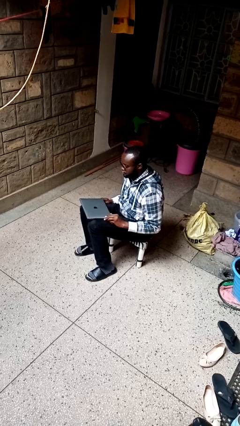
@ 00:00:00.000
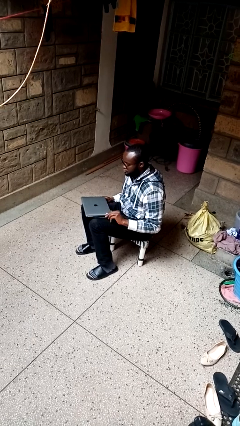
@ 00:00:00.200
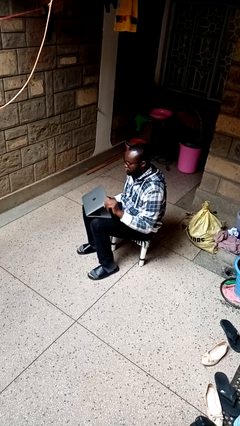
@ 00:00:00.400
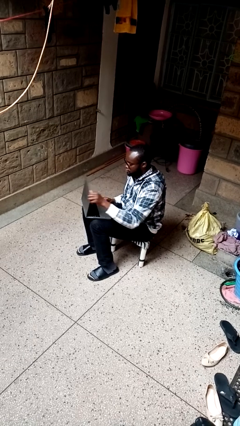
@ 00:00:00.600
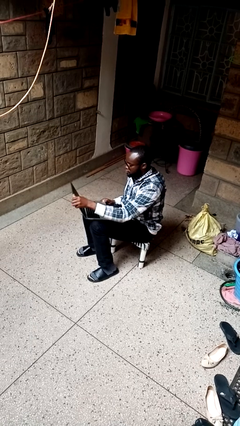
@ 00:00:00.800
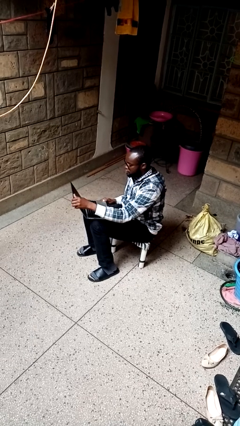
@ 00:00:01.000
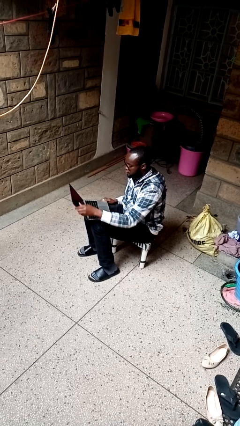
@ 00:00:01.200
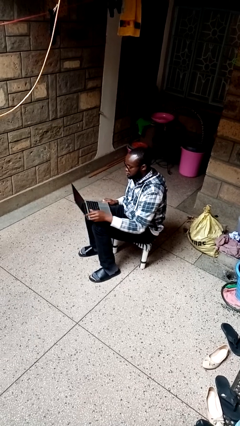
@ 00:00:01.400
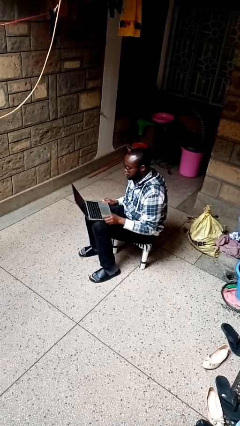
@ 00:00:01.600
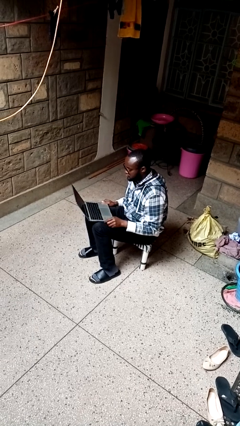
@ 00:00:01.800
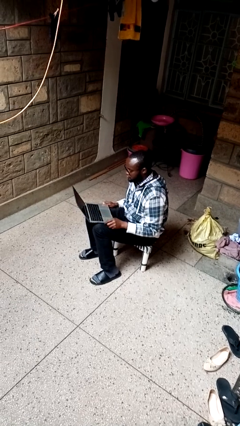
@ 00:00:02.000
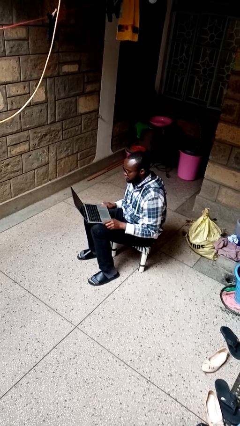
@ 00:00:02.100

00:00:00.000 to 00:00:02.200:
person opens laptop

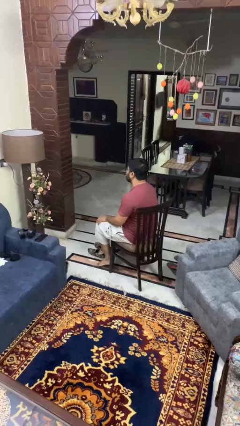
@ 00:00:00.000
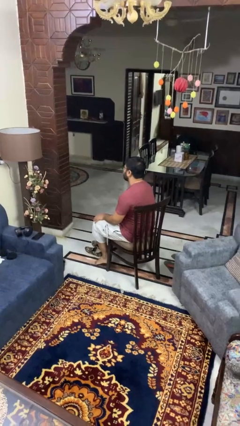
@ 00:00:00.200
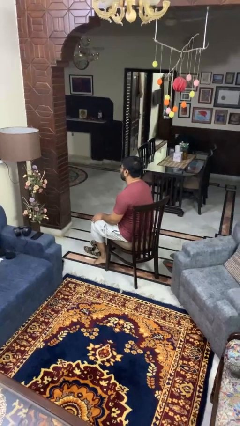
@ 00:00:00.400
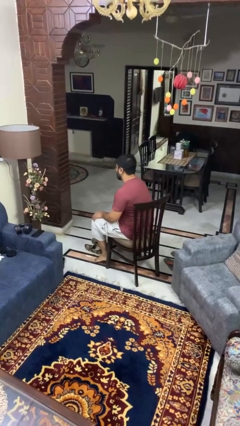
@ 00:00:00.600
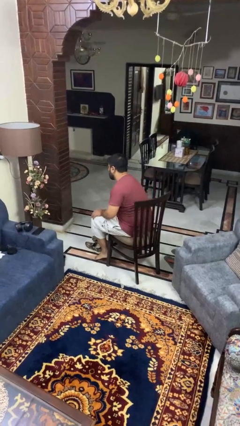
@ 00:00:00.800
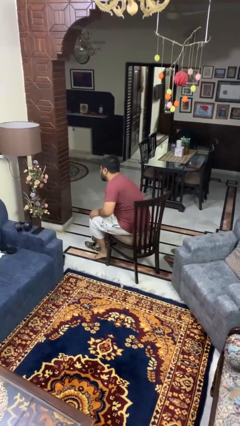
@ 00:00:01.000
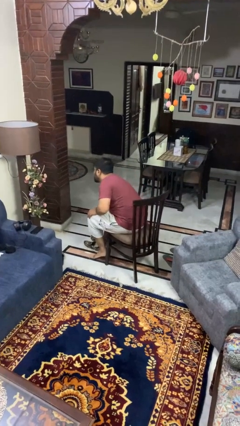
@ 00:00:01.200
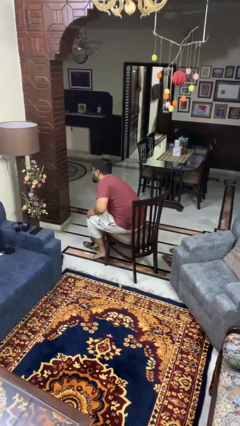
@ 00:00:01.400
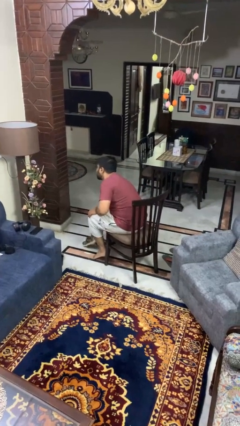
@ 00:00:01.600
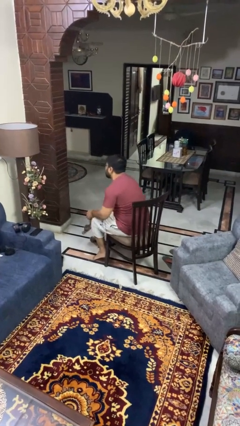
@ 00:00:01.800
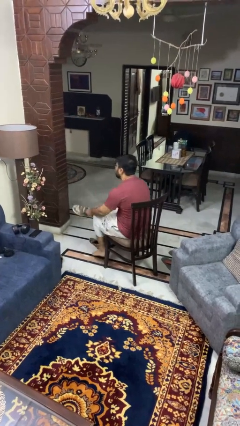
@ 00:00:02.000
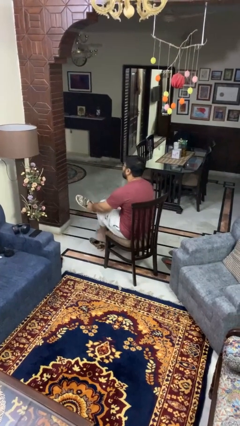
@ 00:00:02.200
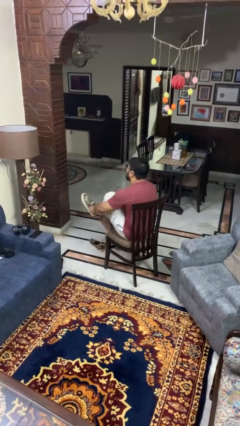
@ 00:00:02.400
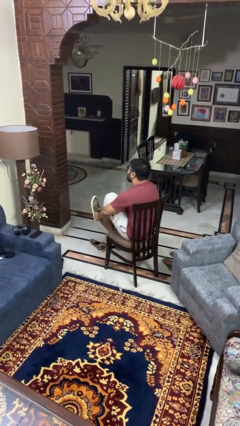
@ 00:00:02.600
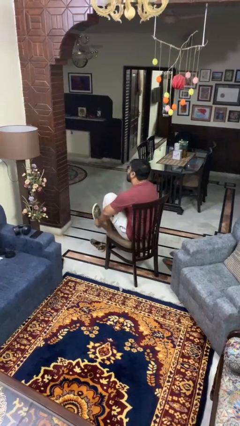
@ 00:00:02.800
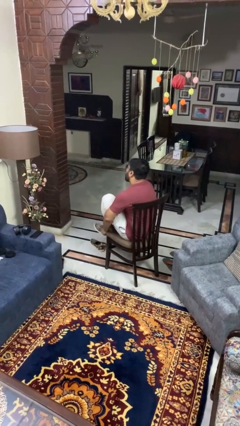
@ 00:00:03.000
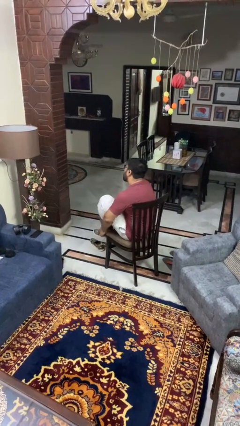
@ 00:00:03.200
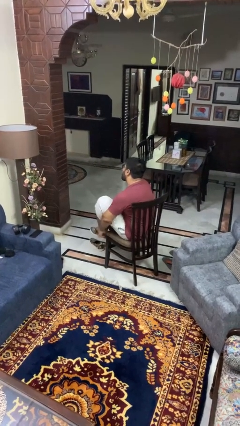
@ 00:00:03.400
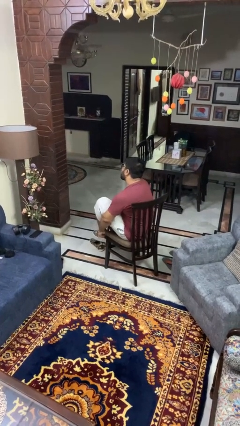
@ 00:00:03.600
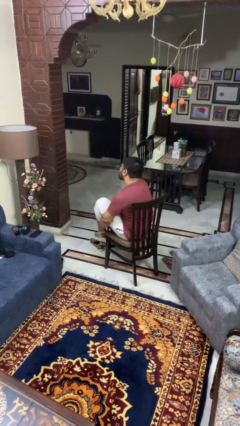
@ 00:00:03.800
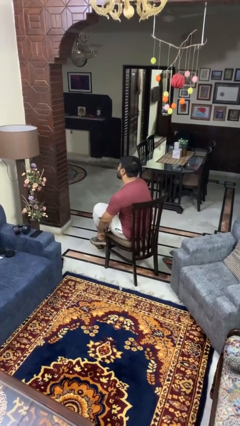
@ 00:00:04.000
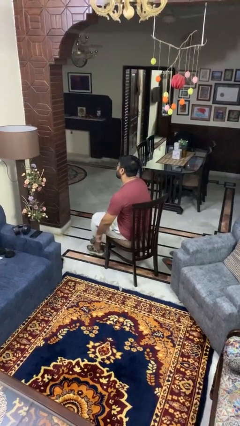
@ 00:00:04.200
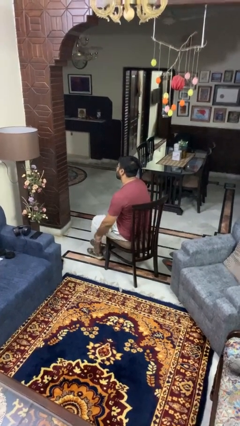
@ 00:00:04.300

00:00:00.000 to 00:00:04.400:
person puts on shoes

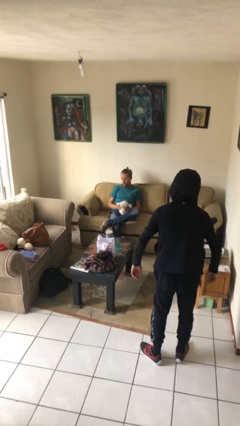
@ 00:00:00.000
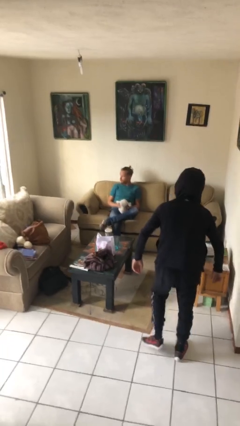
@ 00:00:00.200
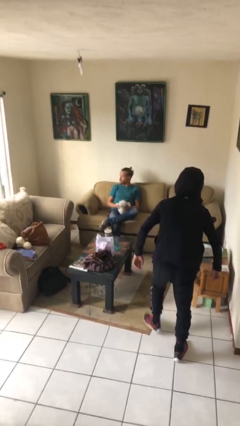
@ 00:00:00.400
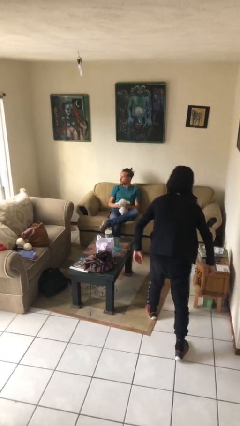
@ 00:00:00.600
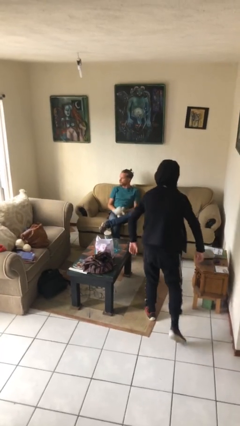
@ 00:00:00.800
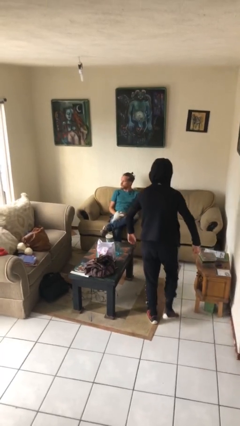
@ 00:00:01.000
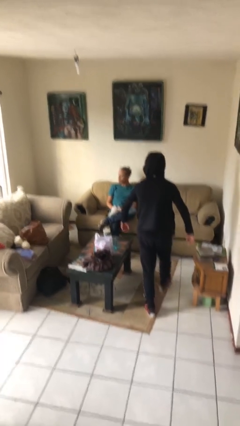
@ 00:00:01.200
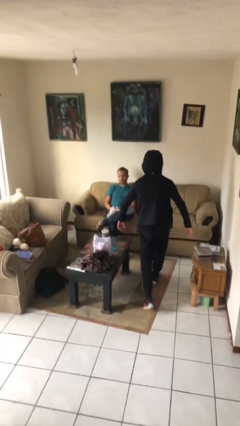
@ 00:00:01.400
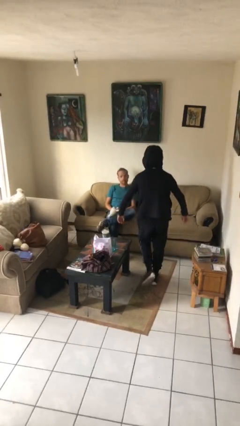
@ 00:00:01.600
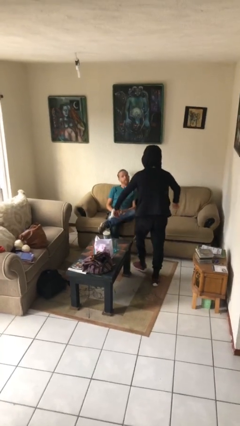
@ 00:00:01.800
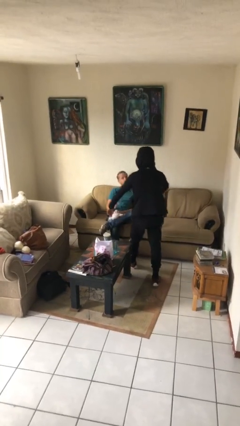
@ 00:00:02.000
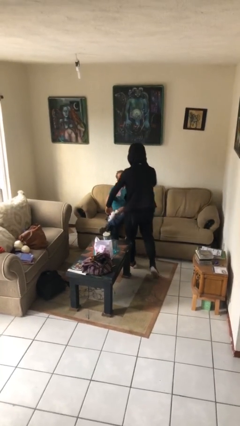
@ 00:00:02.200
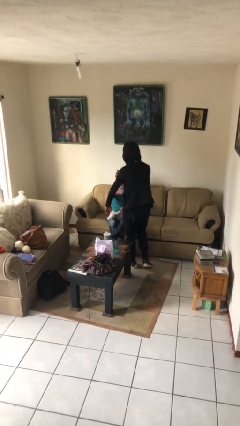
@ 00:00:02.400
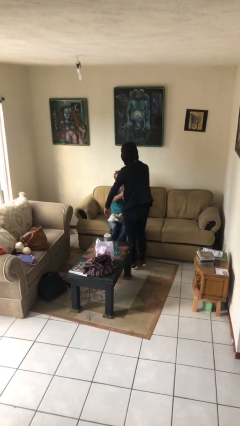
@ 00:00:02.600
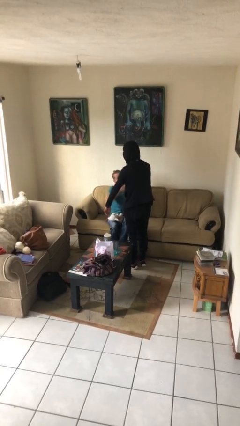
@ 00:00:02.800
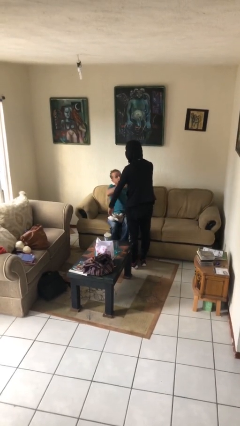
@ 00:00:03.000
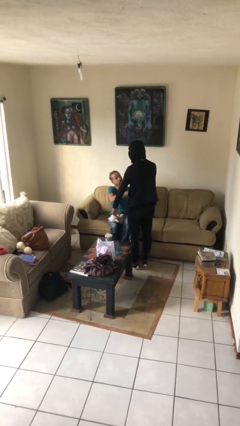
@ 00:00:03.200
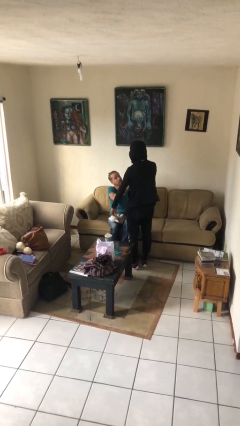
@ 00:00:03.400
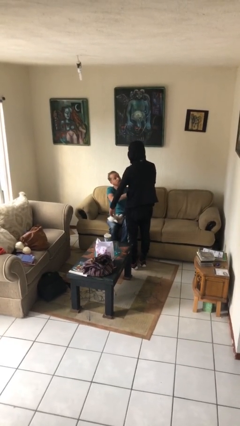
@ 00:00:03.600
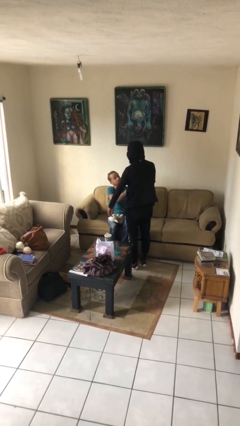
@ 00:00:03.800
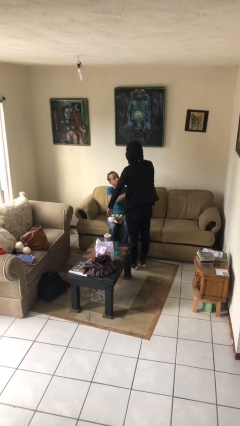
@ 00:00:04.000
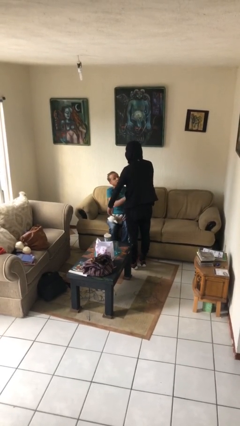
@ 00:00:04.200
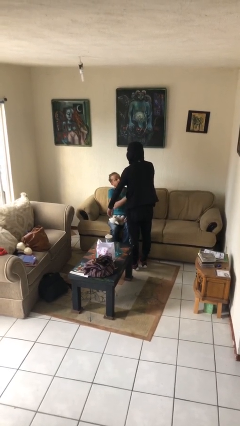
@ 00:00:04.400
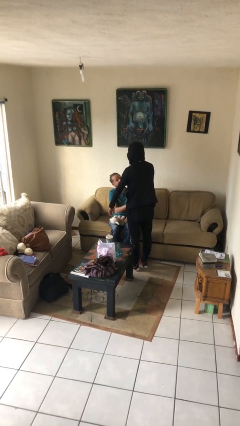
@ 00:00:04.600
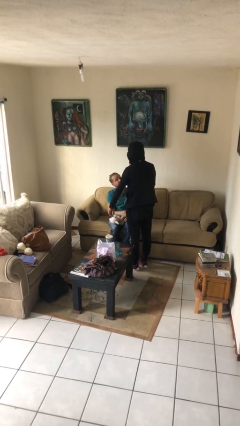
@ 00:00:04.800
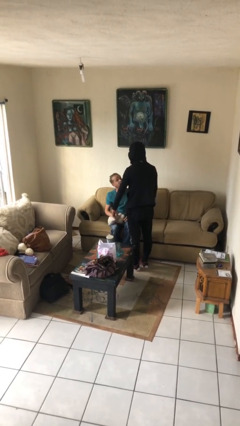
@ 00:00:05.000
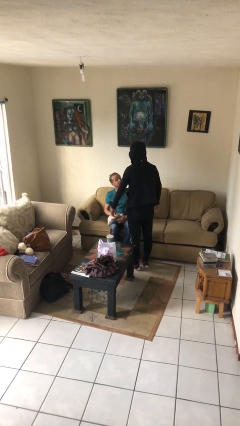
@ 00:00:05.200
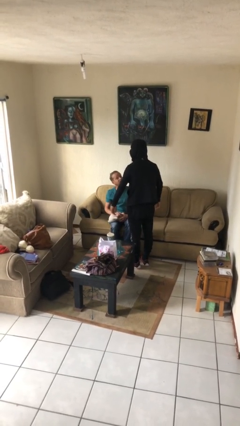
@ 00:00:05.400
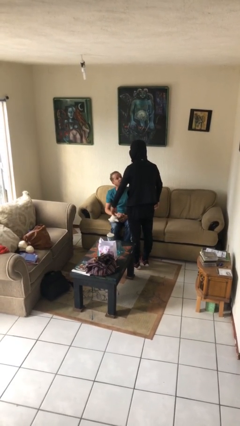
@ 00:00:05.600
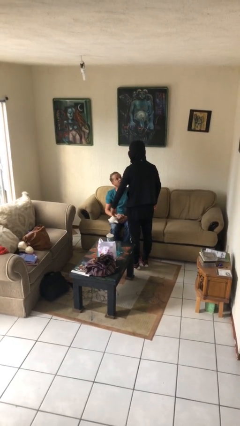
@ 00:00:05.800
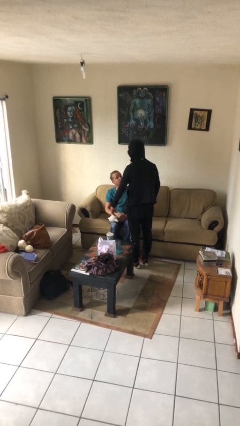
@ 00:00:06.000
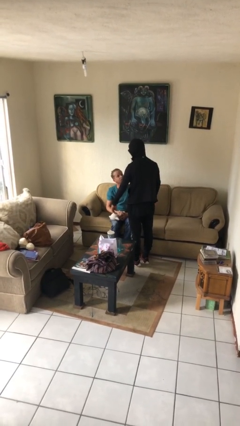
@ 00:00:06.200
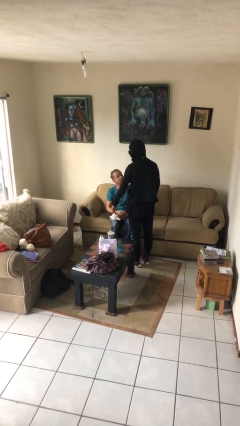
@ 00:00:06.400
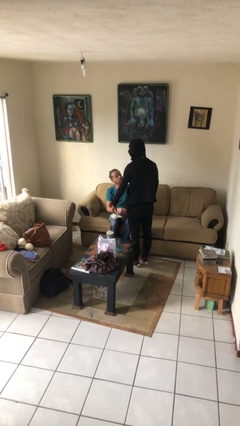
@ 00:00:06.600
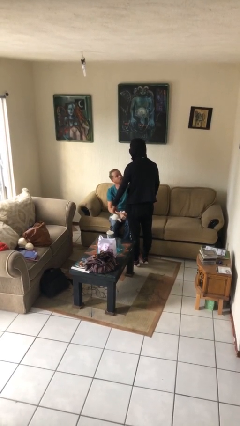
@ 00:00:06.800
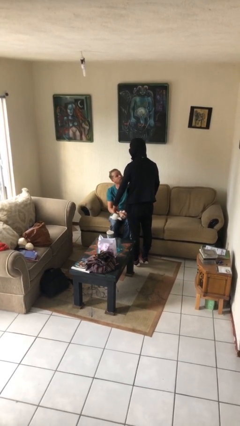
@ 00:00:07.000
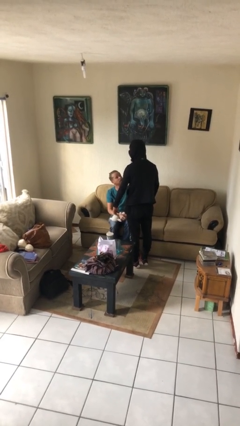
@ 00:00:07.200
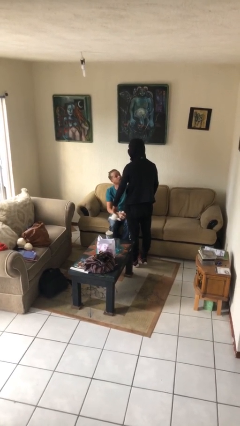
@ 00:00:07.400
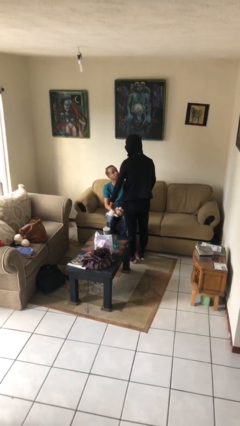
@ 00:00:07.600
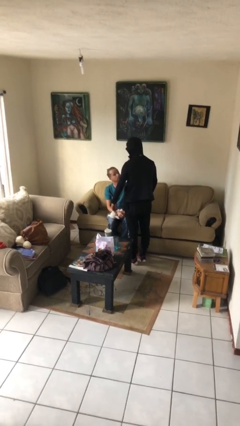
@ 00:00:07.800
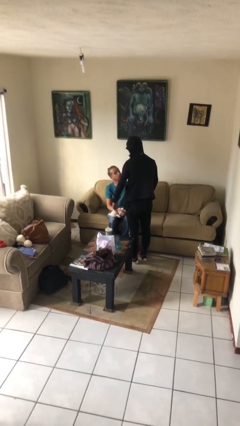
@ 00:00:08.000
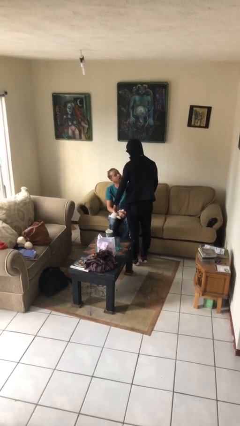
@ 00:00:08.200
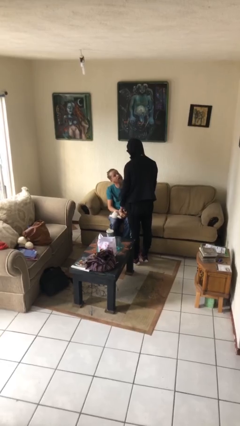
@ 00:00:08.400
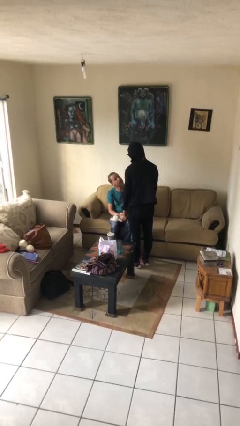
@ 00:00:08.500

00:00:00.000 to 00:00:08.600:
person shakes hand

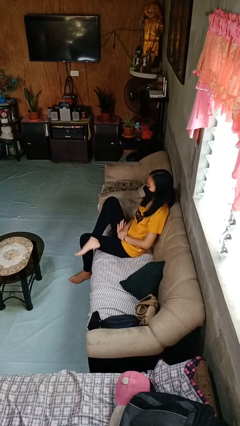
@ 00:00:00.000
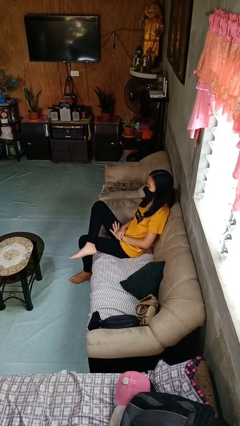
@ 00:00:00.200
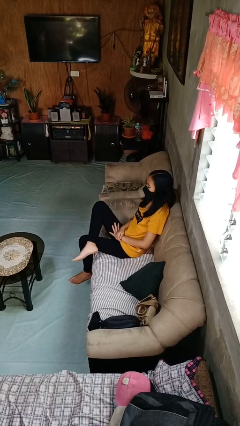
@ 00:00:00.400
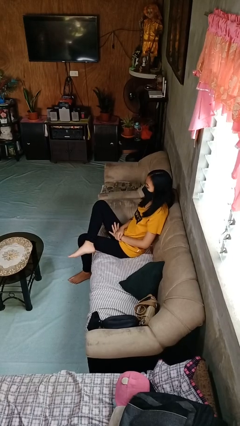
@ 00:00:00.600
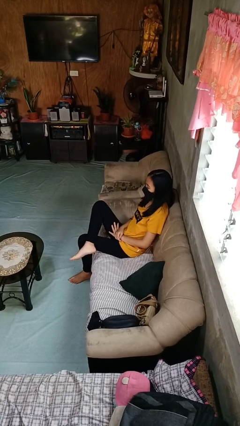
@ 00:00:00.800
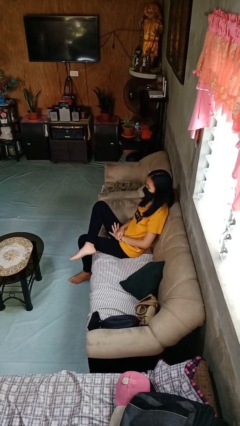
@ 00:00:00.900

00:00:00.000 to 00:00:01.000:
person crosses legs

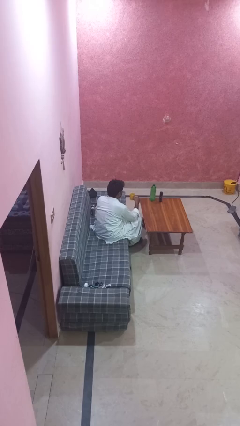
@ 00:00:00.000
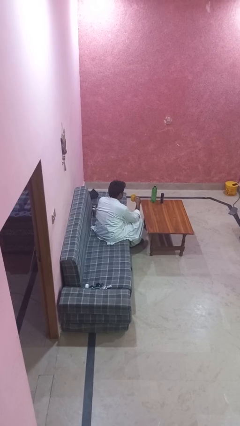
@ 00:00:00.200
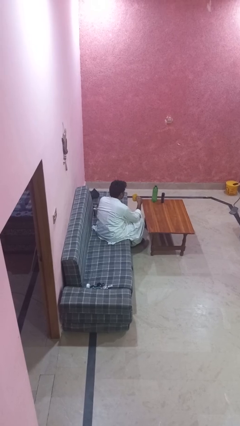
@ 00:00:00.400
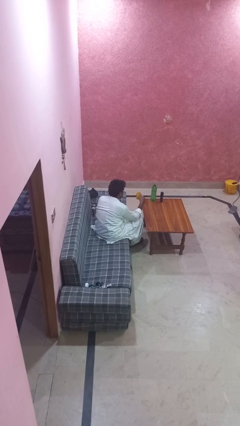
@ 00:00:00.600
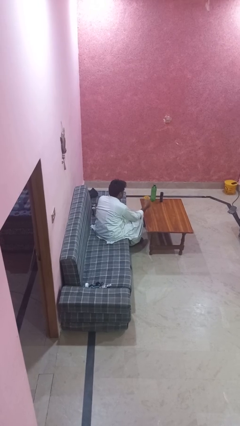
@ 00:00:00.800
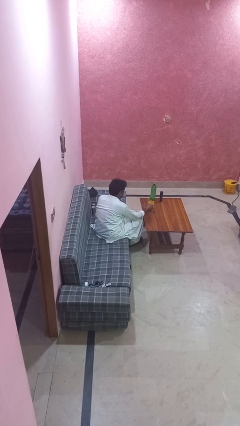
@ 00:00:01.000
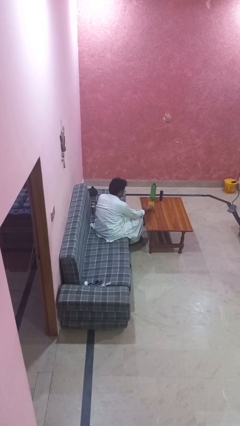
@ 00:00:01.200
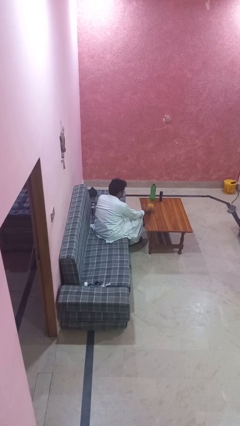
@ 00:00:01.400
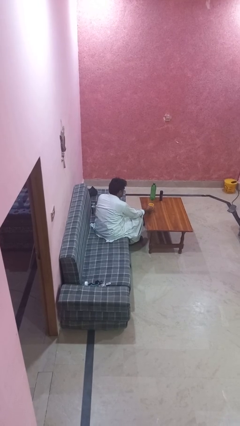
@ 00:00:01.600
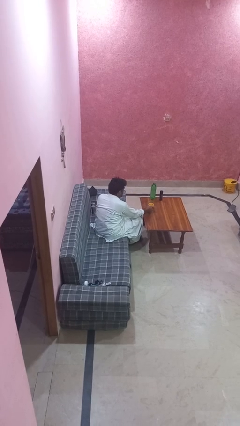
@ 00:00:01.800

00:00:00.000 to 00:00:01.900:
person puts down object on table
